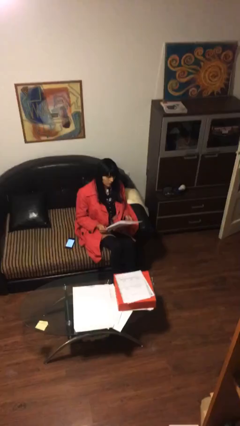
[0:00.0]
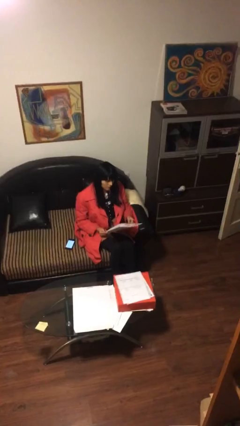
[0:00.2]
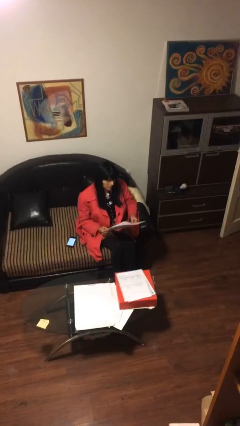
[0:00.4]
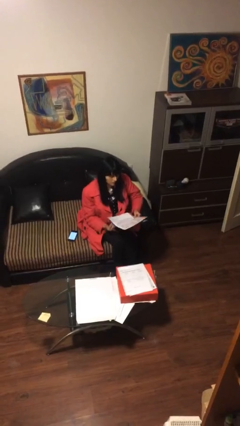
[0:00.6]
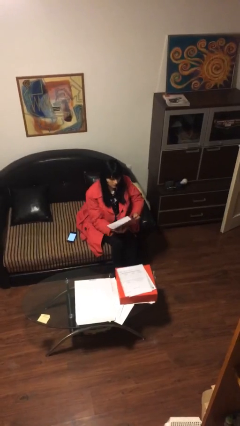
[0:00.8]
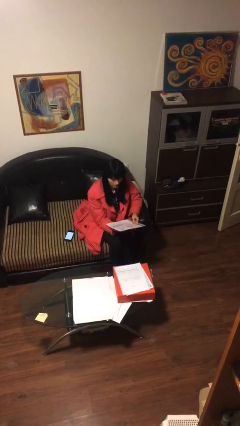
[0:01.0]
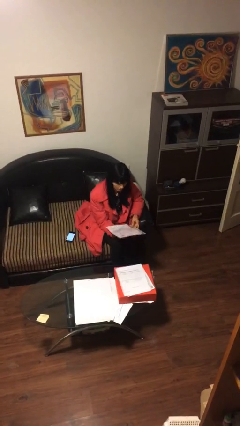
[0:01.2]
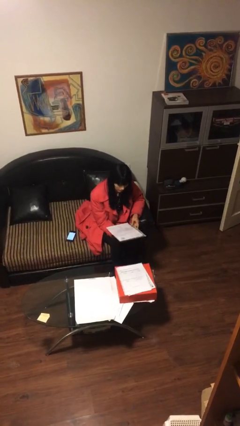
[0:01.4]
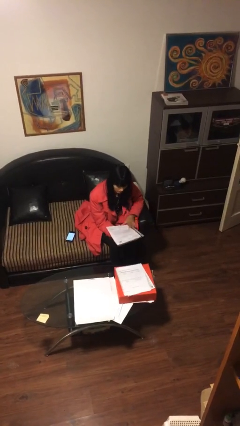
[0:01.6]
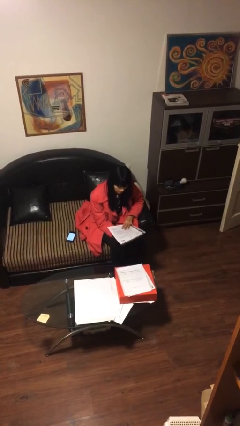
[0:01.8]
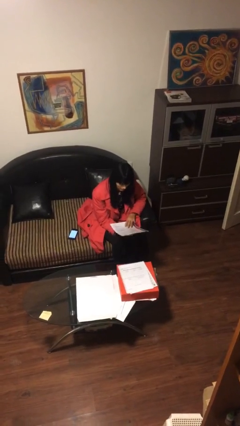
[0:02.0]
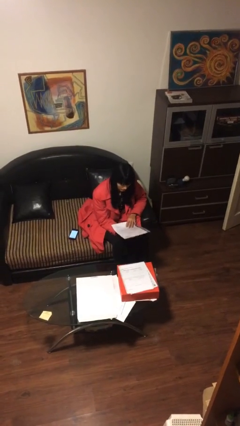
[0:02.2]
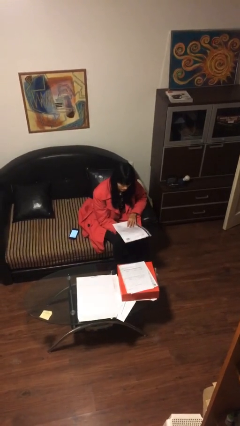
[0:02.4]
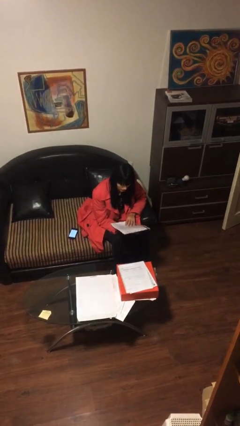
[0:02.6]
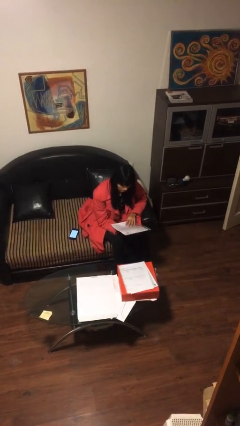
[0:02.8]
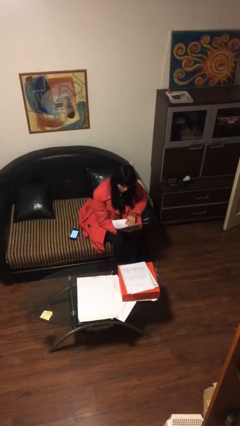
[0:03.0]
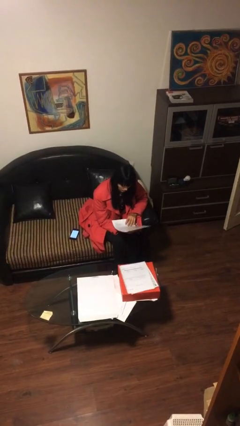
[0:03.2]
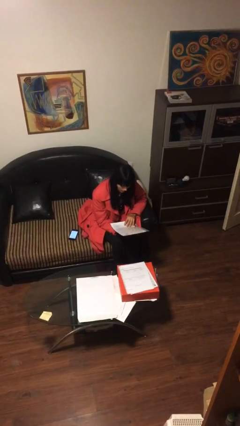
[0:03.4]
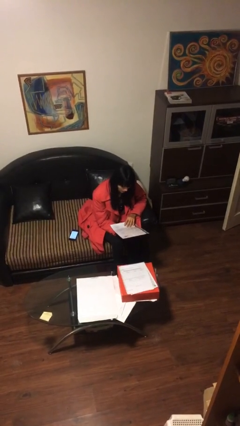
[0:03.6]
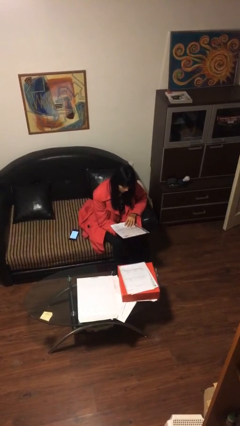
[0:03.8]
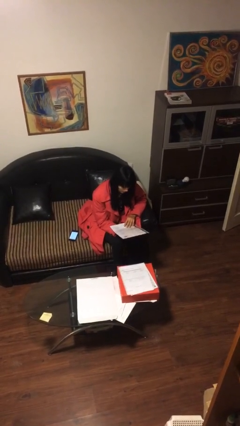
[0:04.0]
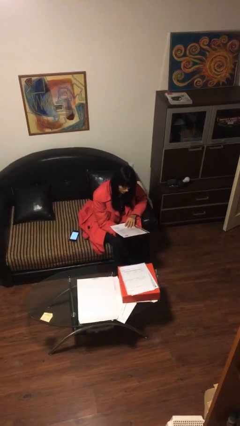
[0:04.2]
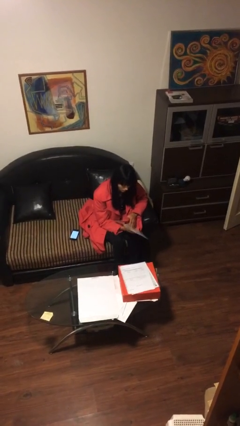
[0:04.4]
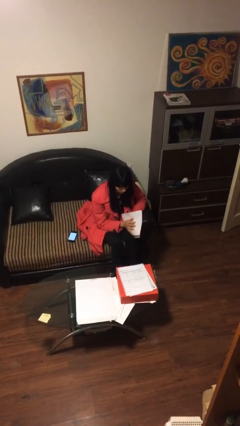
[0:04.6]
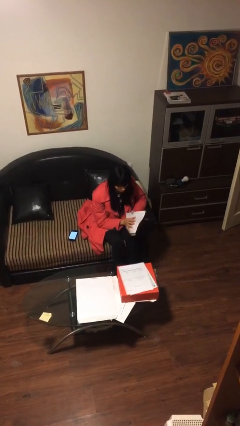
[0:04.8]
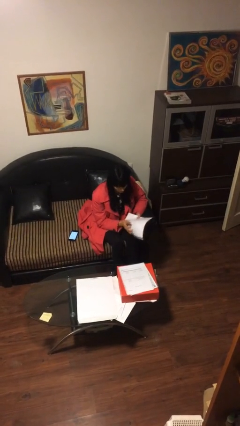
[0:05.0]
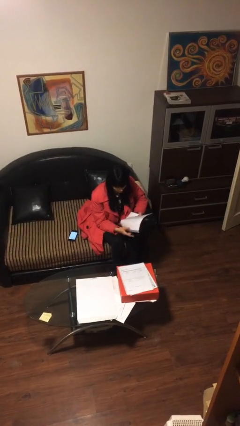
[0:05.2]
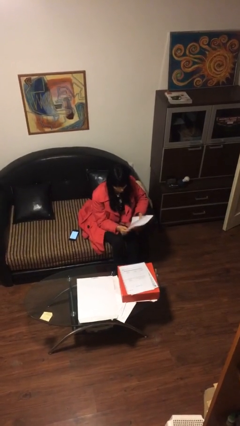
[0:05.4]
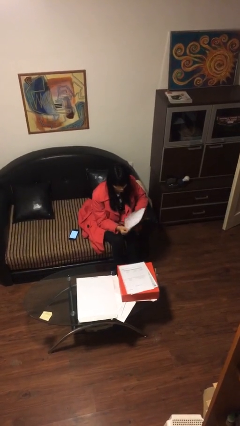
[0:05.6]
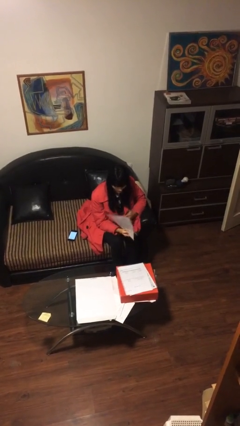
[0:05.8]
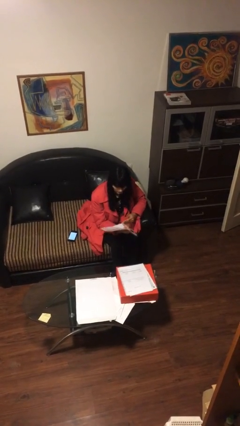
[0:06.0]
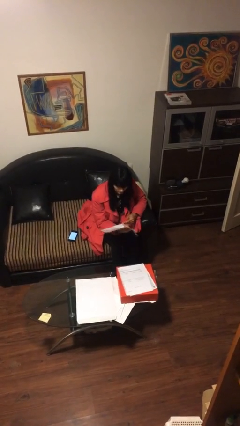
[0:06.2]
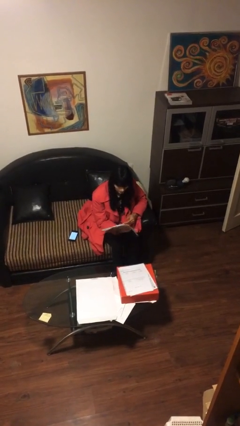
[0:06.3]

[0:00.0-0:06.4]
person reads document

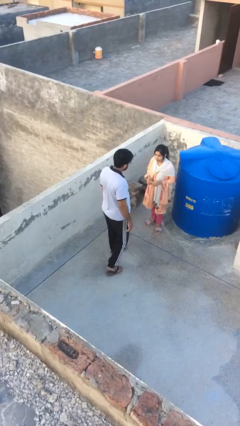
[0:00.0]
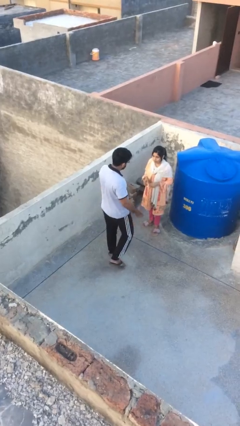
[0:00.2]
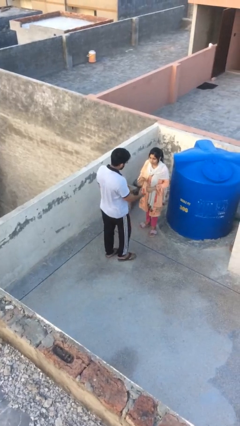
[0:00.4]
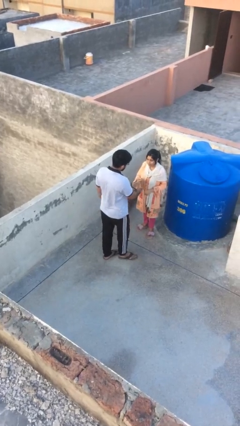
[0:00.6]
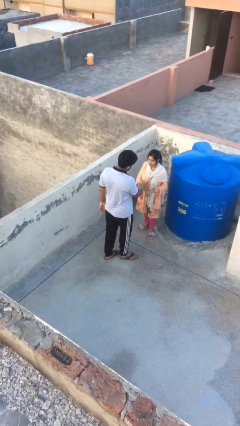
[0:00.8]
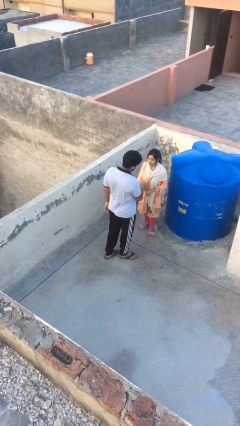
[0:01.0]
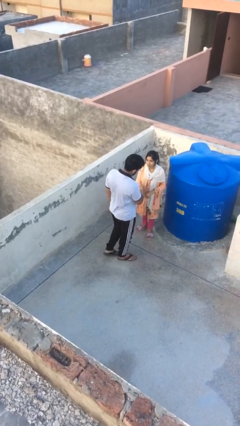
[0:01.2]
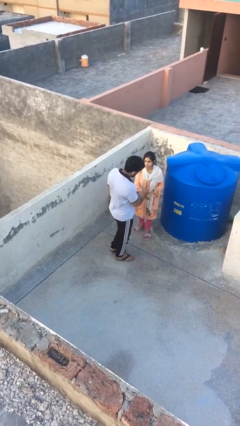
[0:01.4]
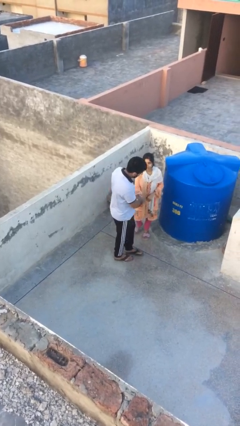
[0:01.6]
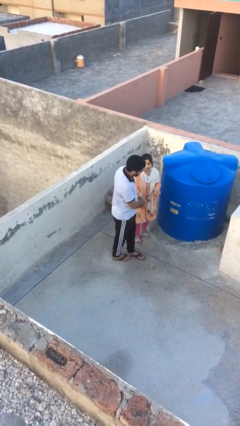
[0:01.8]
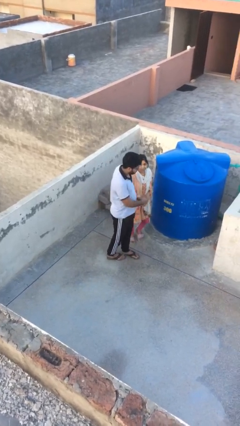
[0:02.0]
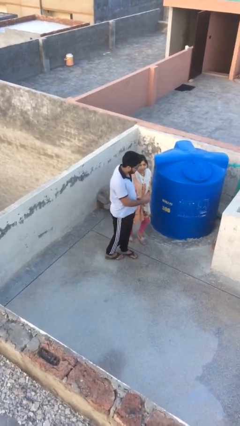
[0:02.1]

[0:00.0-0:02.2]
person shakes hand

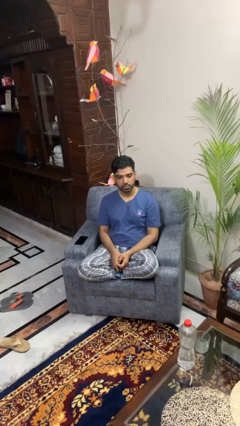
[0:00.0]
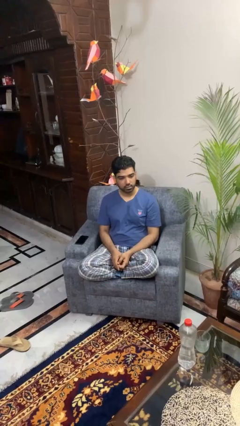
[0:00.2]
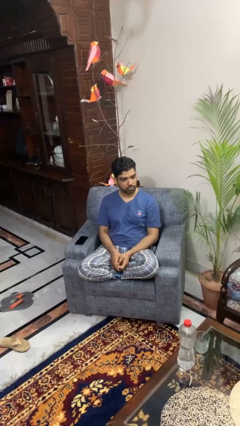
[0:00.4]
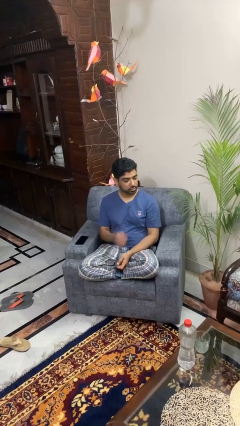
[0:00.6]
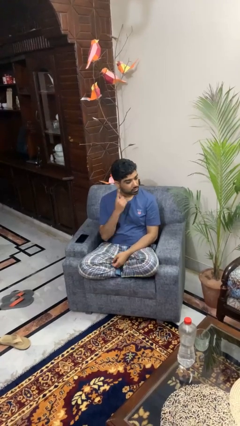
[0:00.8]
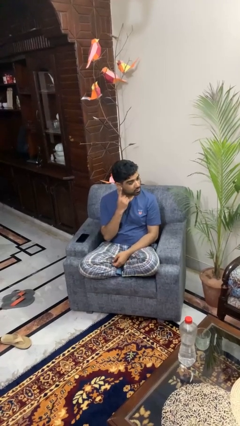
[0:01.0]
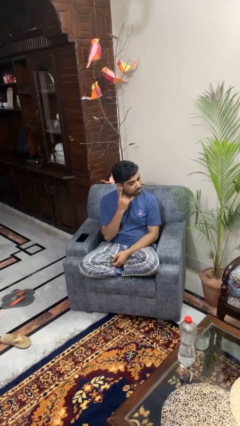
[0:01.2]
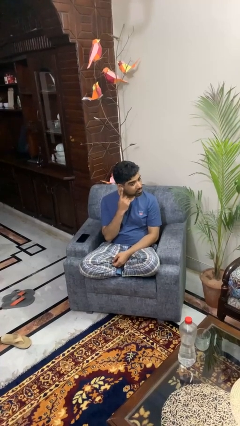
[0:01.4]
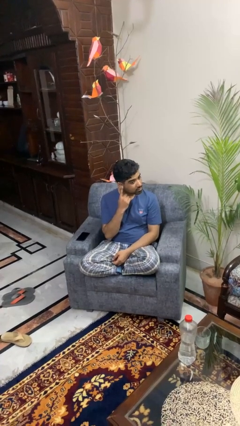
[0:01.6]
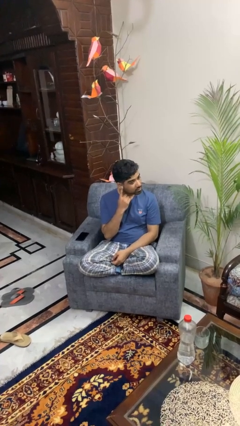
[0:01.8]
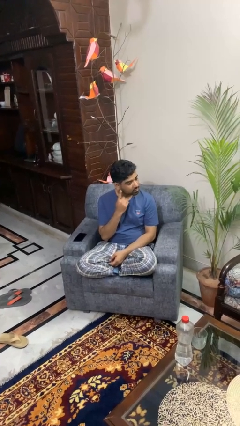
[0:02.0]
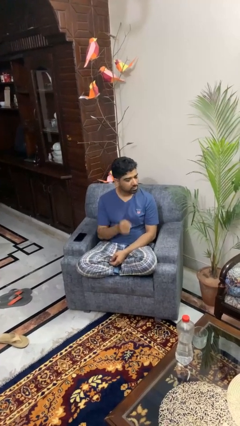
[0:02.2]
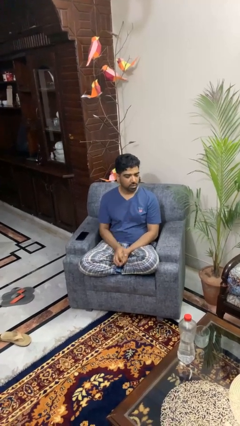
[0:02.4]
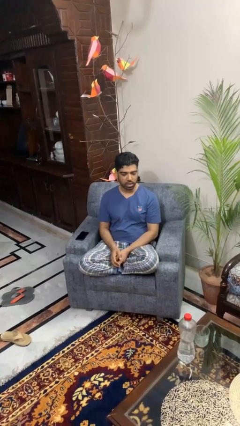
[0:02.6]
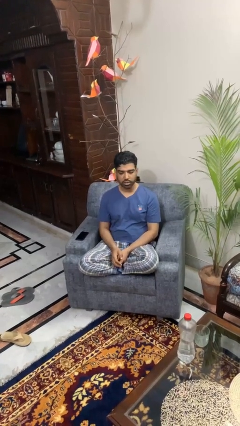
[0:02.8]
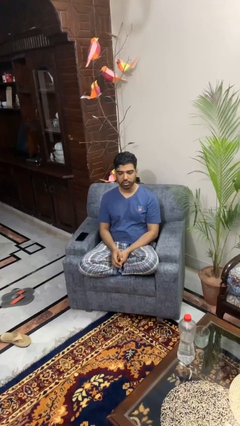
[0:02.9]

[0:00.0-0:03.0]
person gestures listen closely

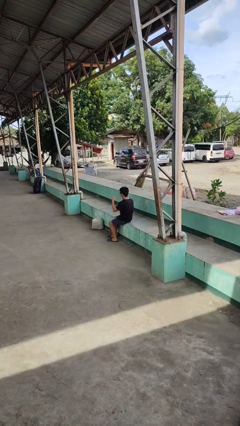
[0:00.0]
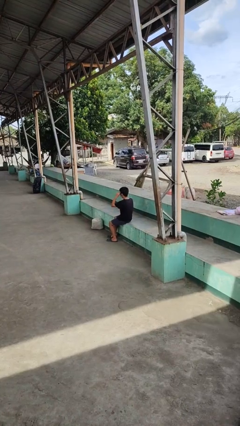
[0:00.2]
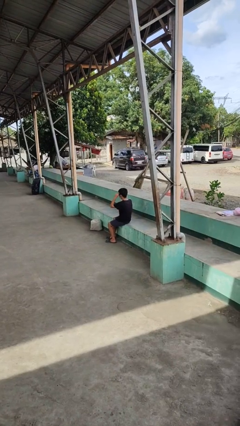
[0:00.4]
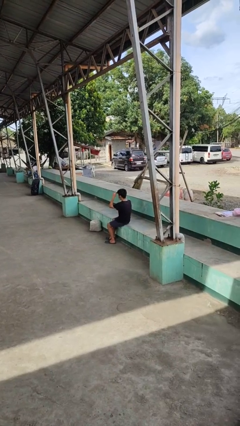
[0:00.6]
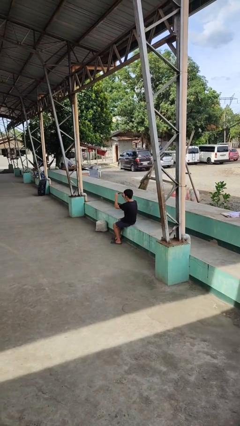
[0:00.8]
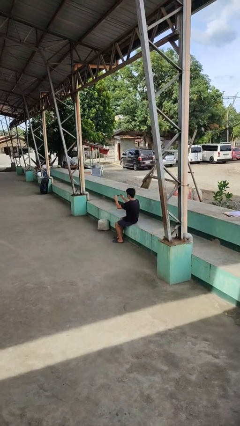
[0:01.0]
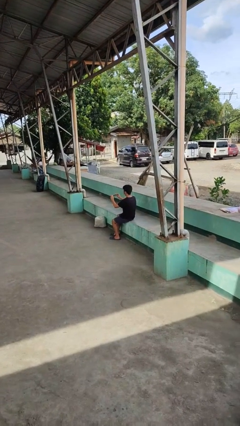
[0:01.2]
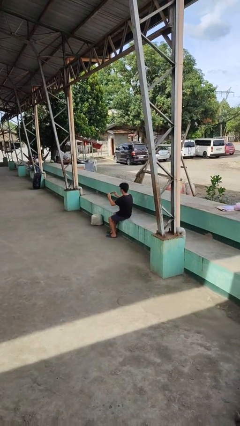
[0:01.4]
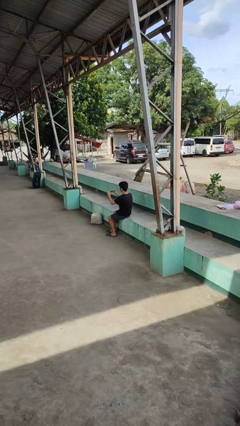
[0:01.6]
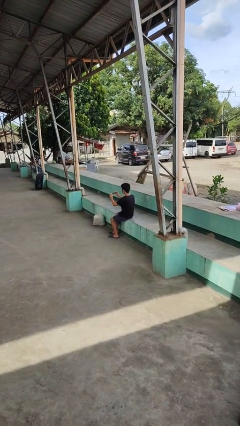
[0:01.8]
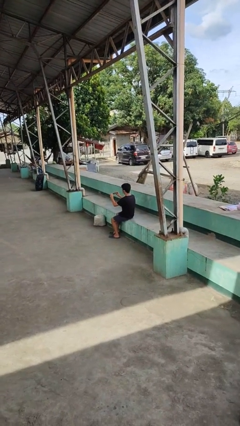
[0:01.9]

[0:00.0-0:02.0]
person takes off sunglasses

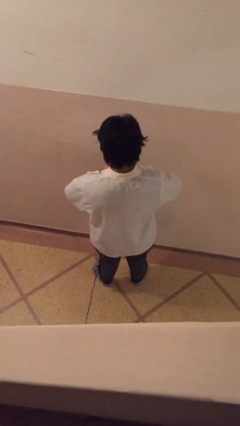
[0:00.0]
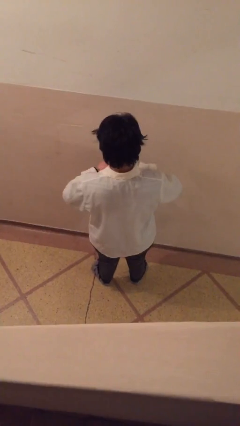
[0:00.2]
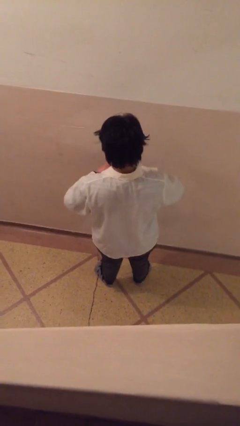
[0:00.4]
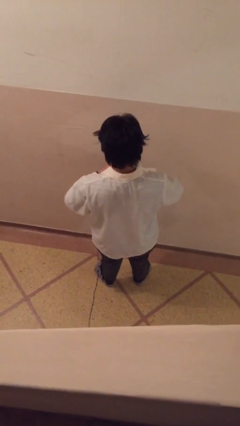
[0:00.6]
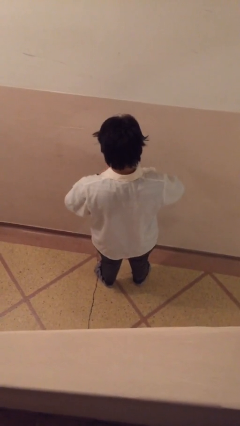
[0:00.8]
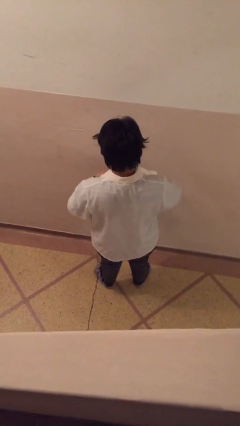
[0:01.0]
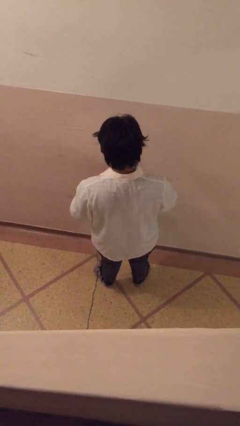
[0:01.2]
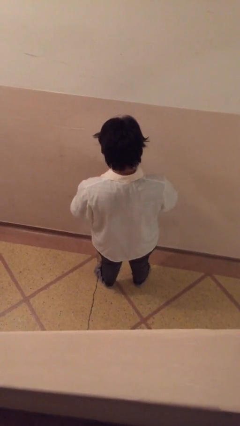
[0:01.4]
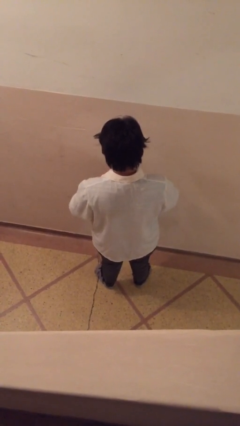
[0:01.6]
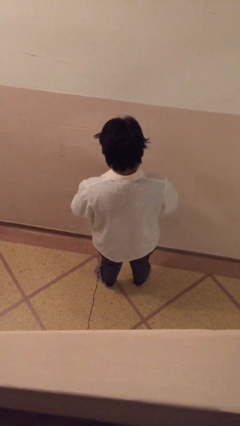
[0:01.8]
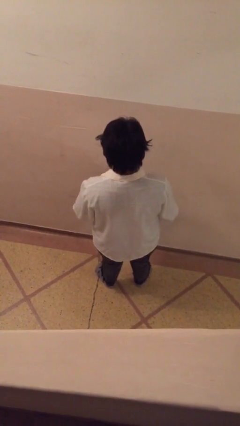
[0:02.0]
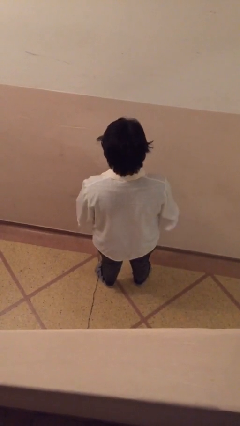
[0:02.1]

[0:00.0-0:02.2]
person unbuttons shirt

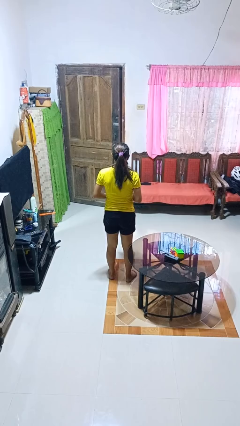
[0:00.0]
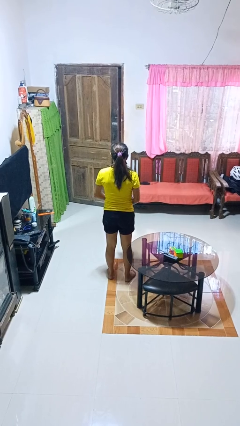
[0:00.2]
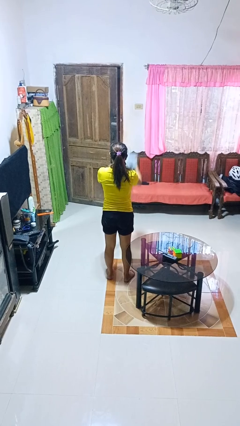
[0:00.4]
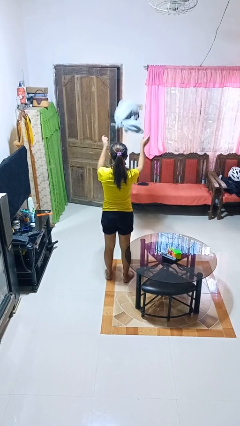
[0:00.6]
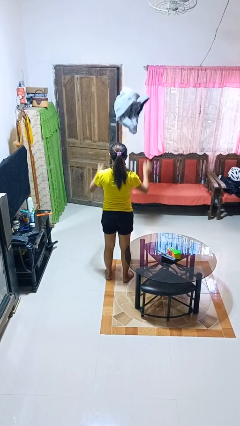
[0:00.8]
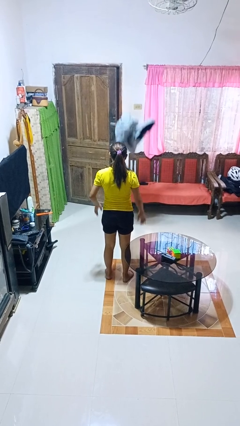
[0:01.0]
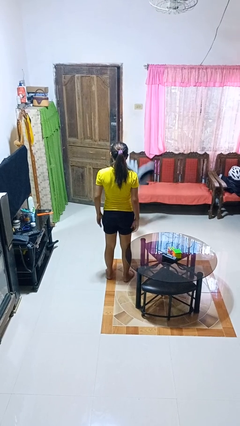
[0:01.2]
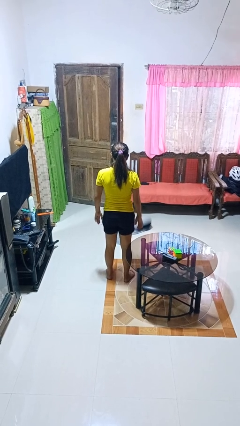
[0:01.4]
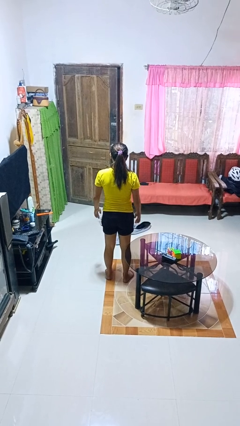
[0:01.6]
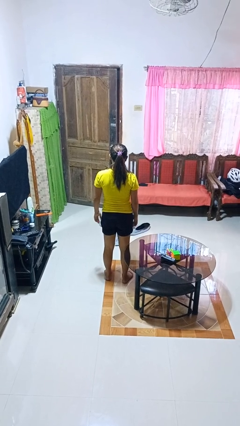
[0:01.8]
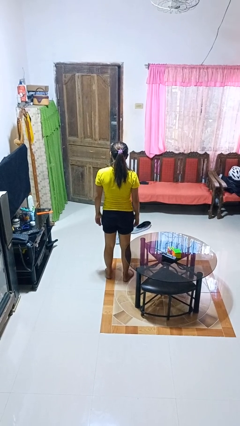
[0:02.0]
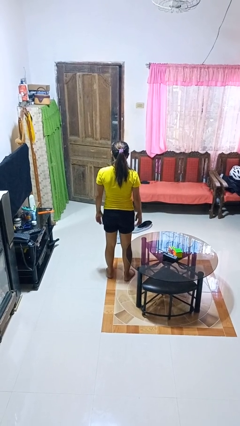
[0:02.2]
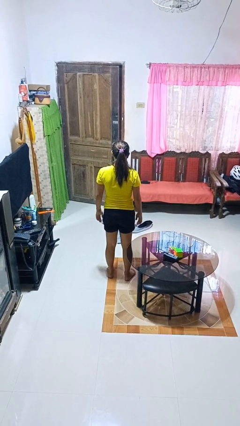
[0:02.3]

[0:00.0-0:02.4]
person throws object into air
